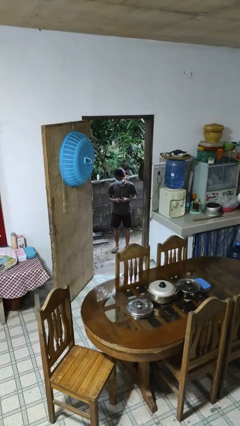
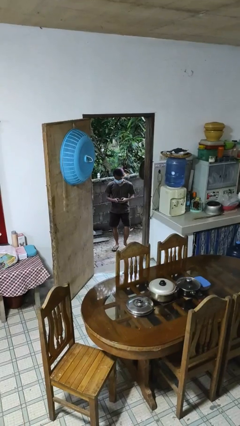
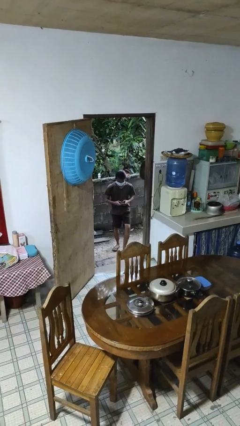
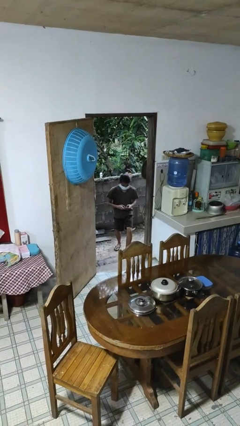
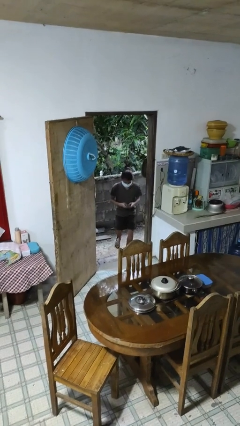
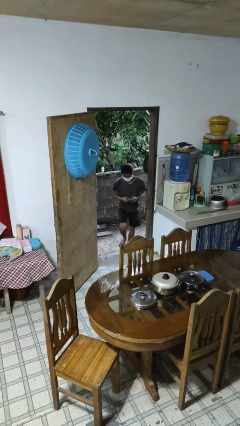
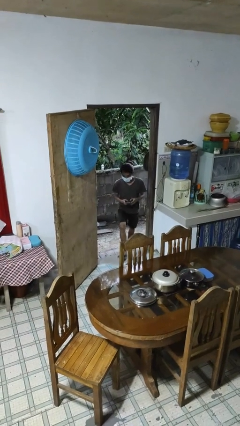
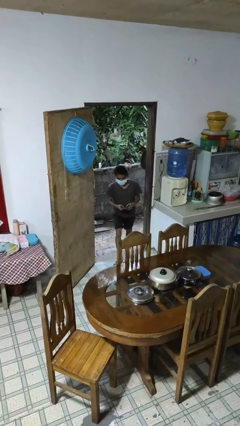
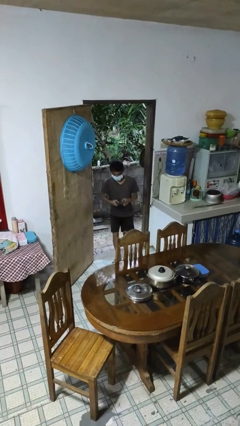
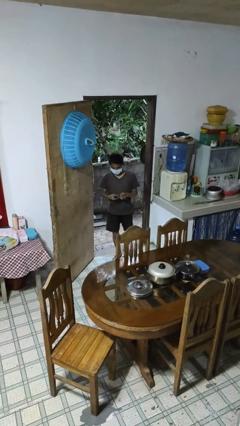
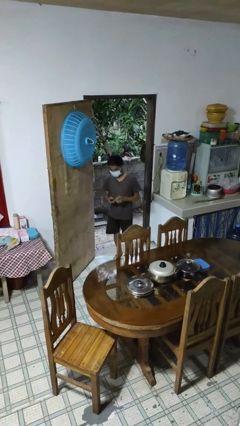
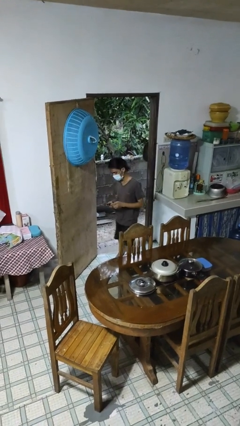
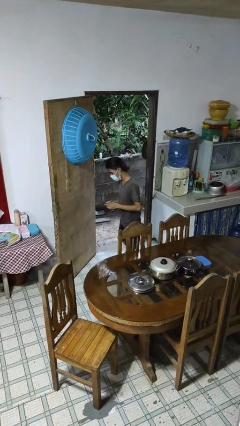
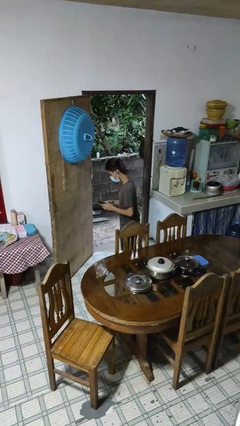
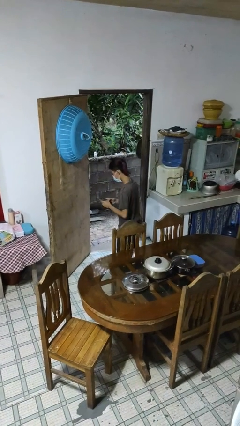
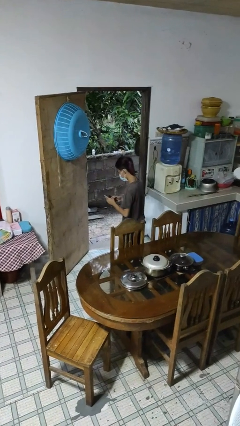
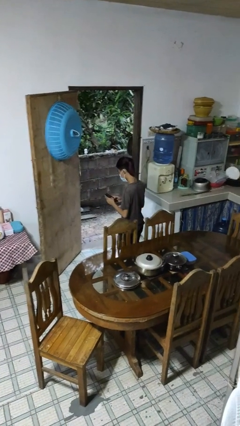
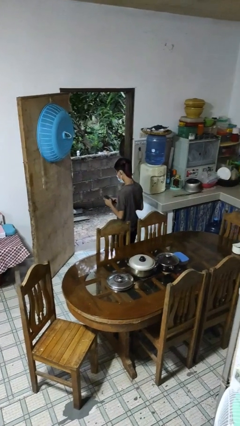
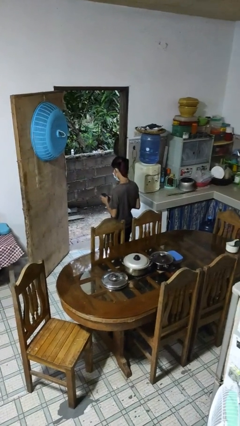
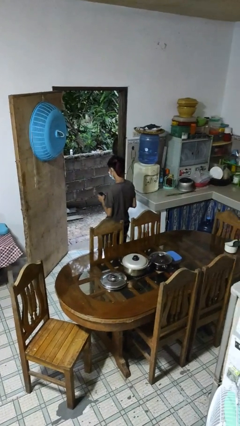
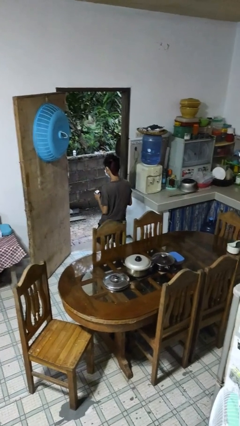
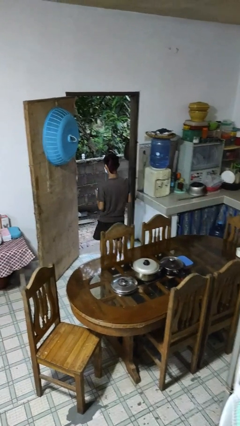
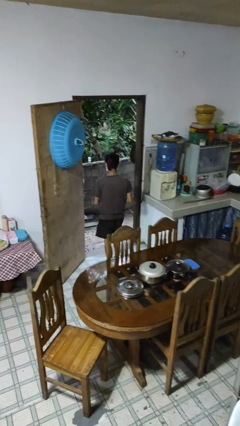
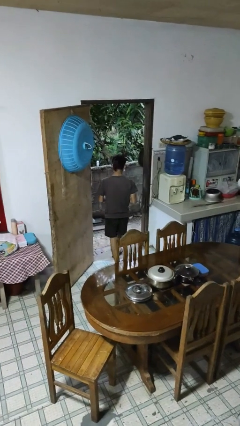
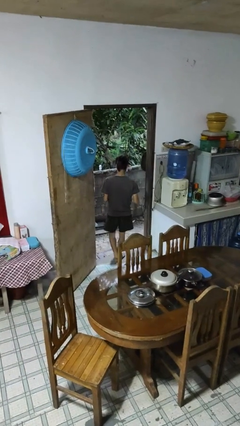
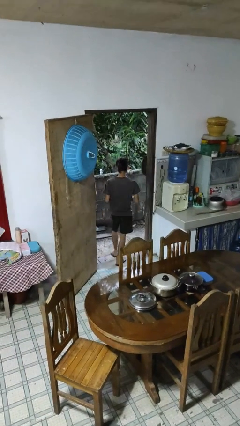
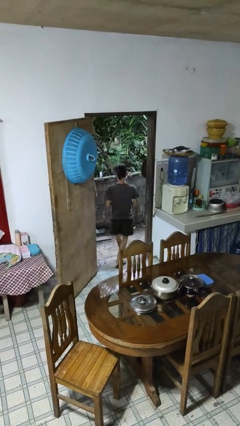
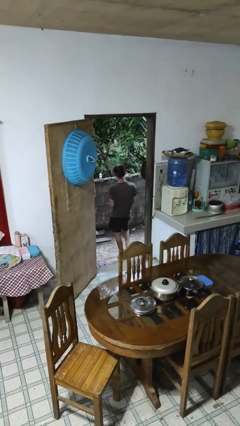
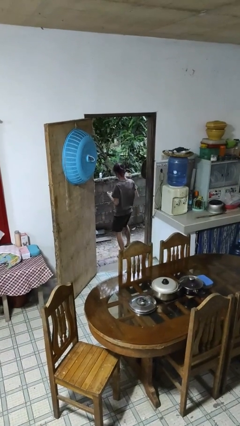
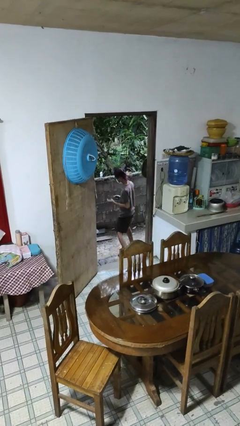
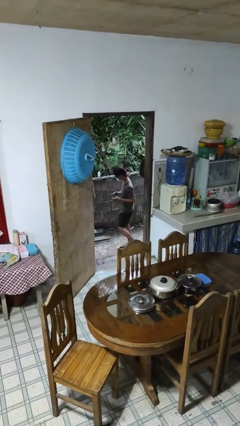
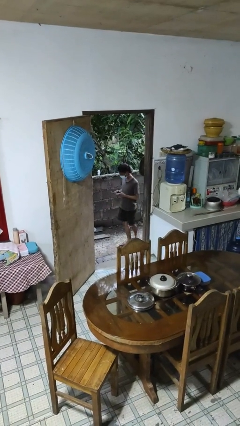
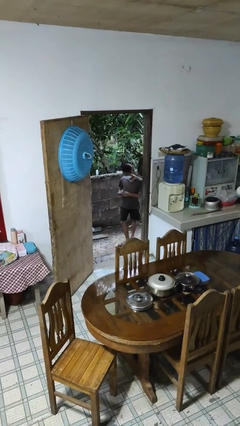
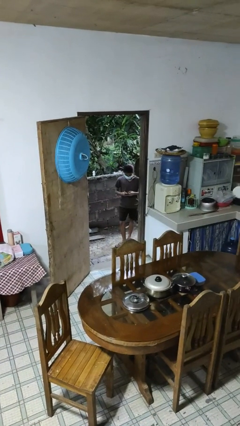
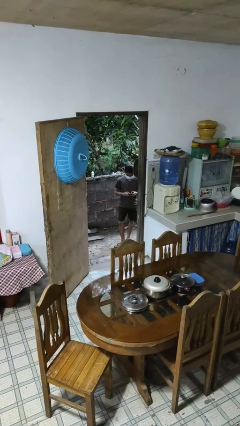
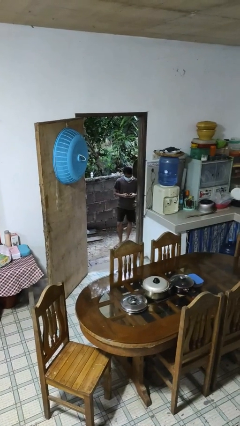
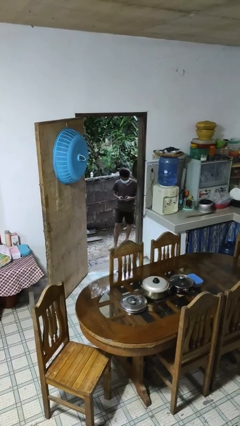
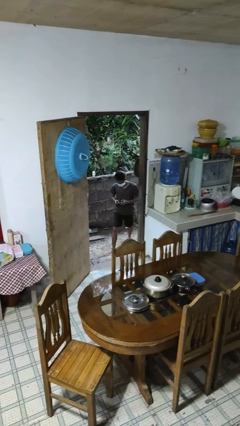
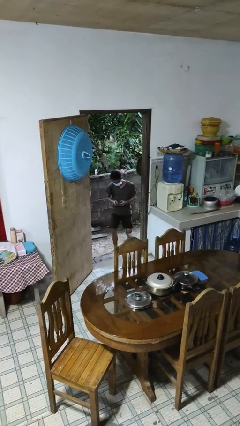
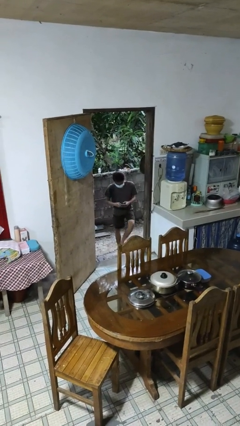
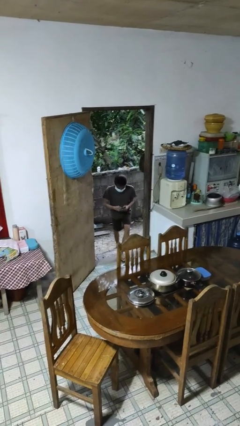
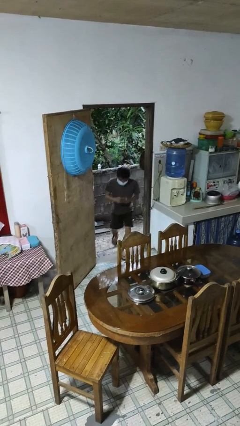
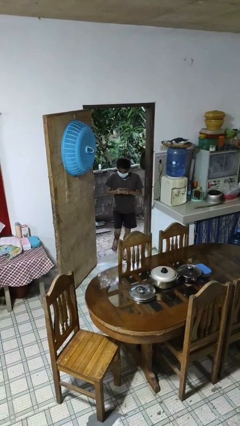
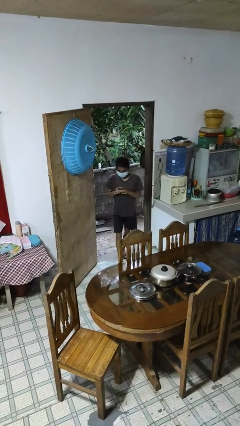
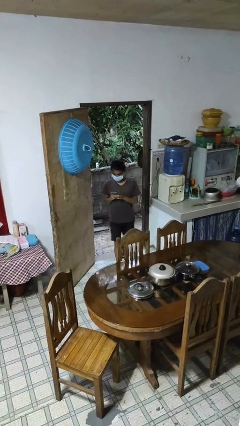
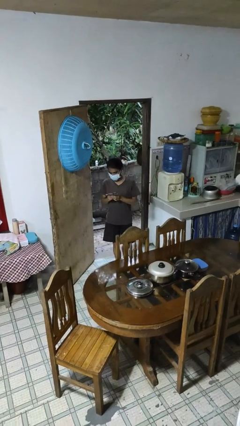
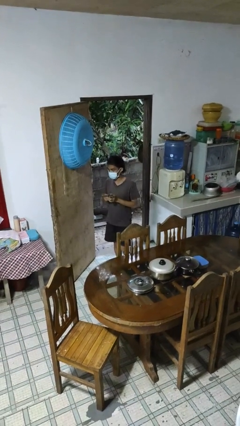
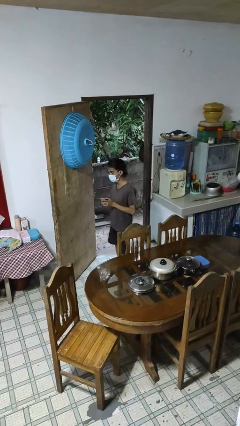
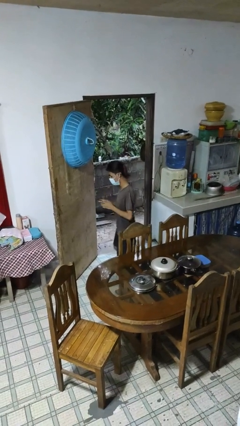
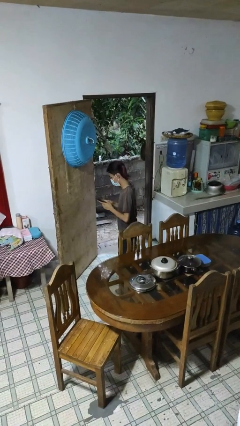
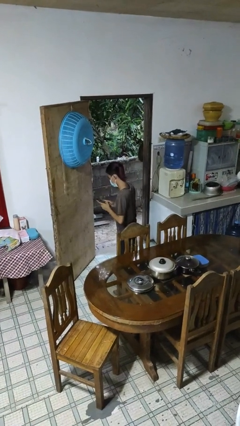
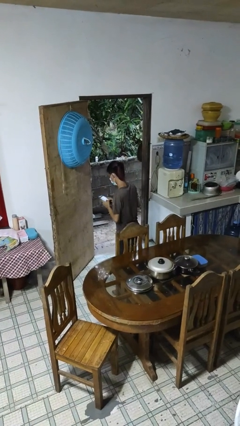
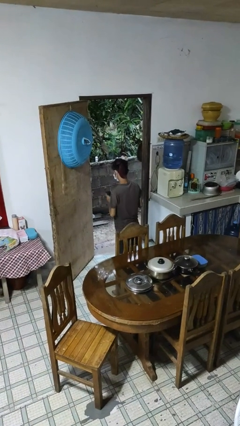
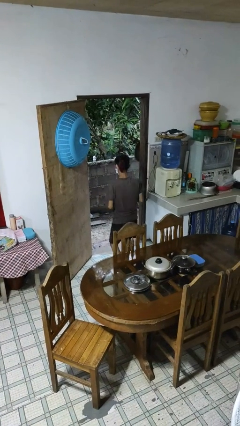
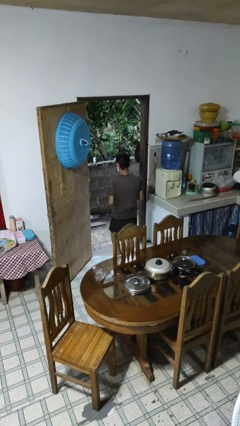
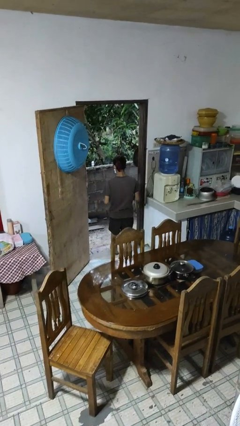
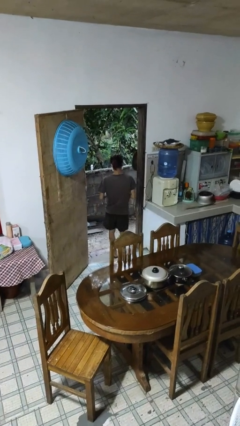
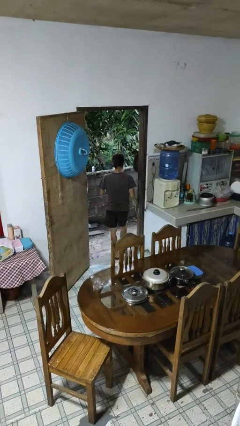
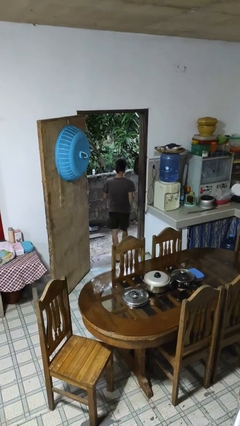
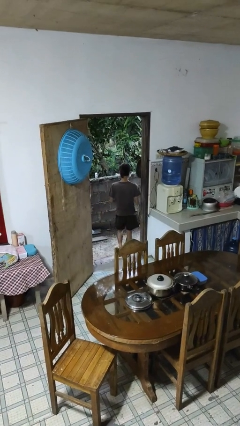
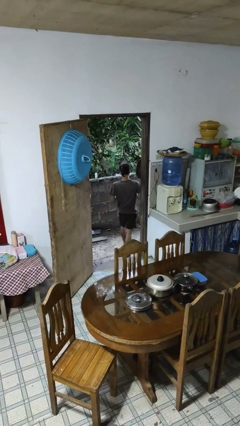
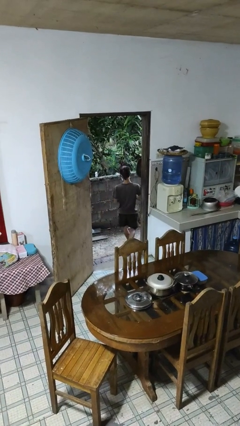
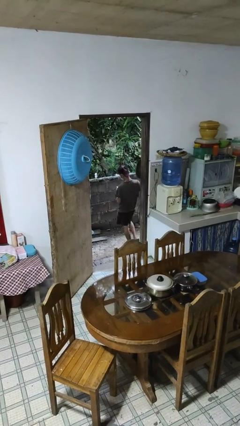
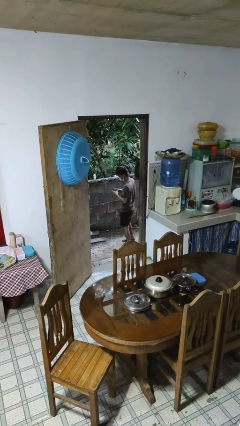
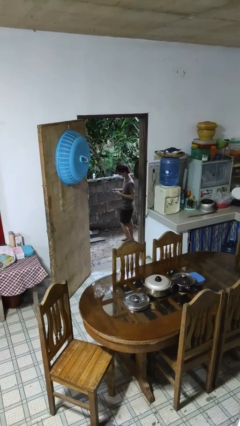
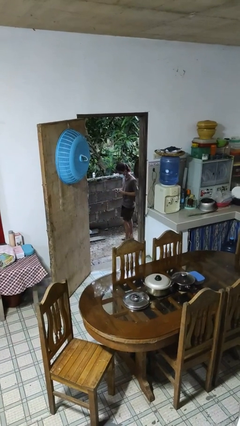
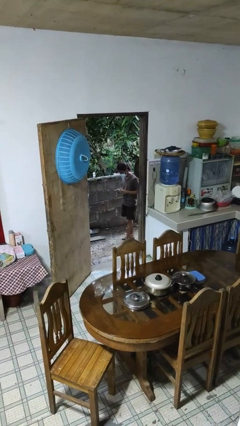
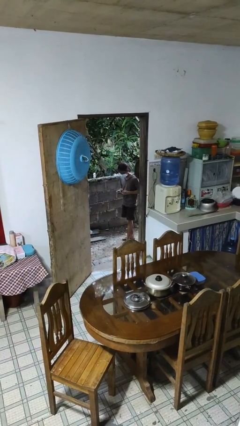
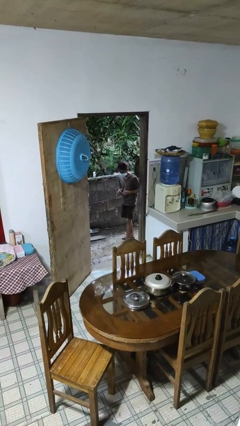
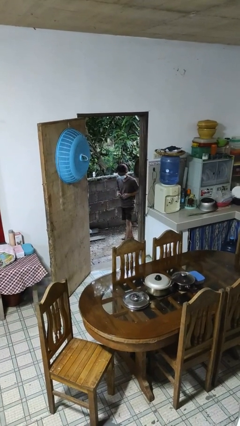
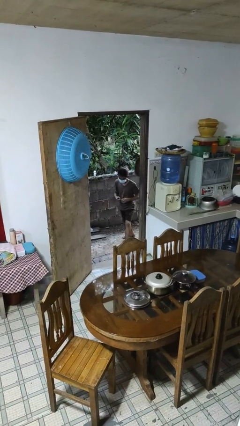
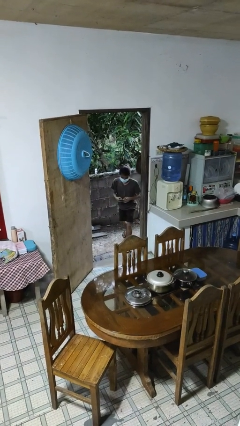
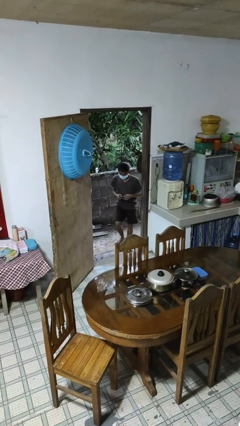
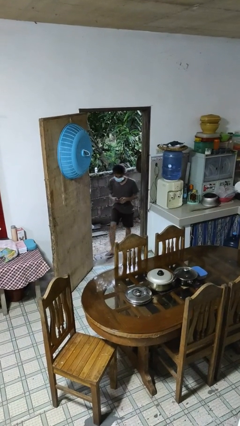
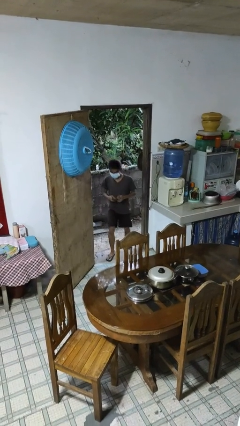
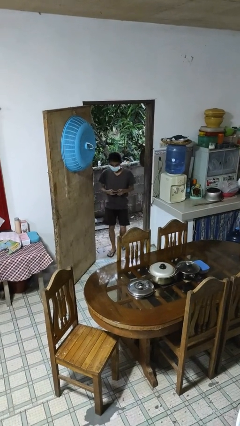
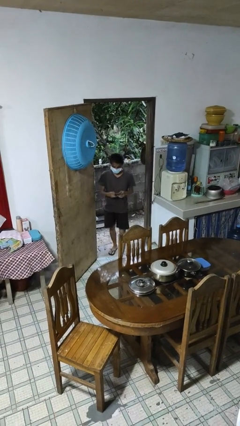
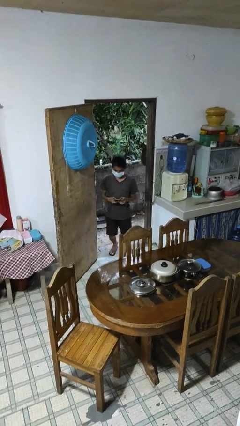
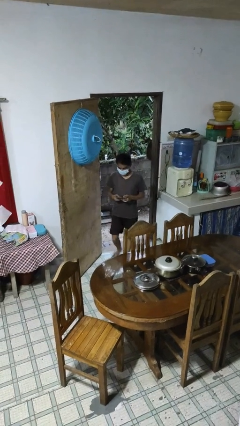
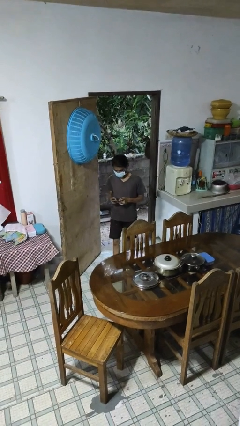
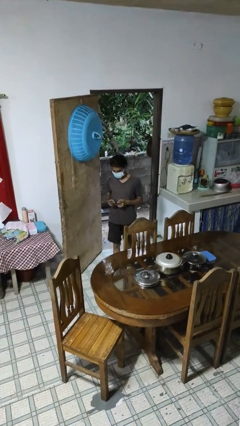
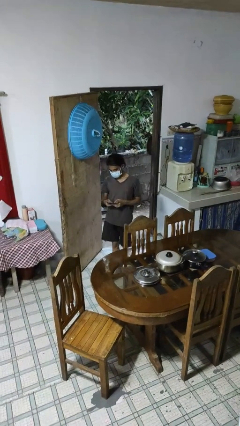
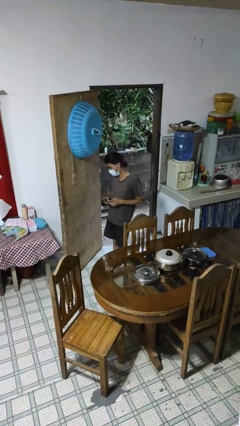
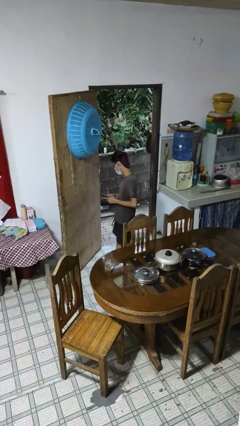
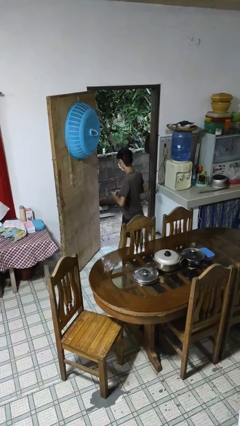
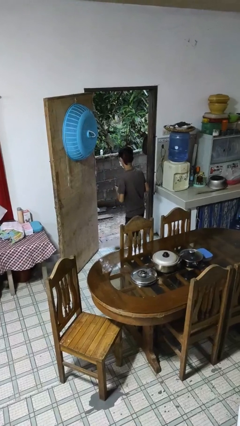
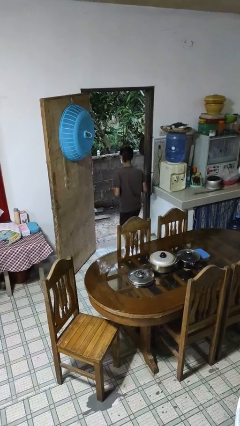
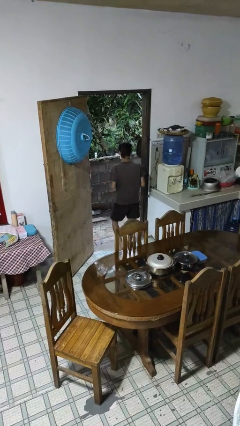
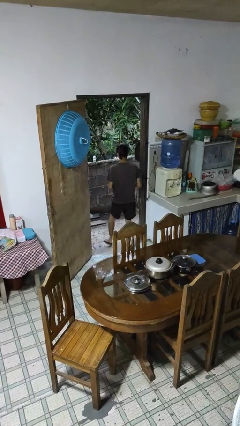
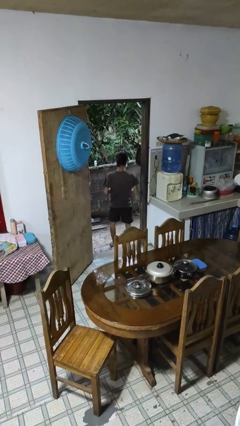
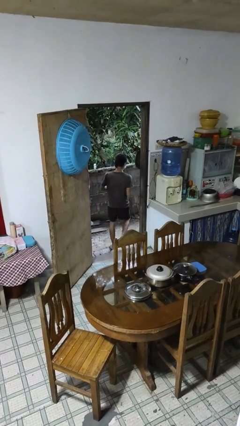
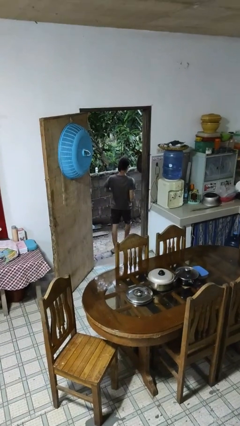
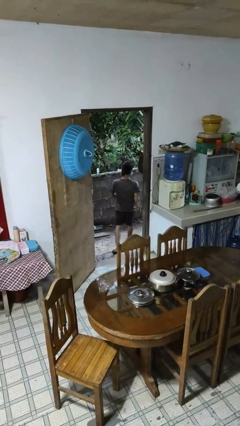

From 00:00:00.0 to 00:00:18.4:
person texts on phone
